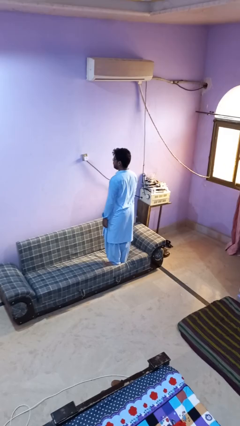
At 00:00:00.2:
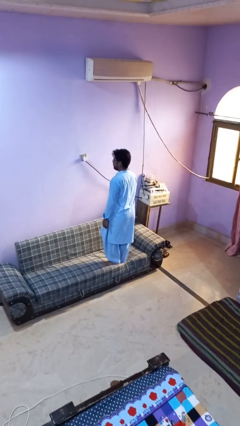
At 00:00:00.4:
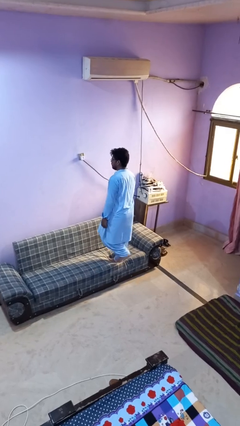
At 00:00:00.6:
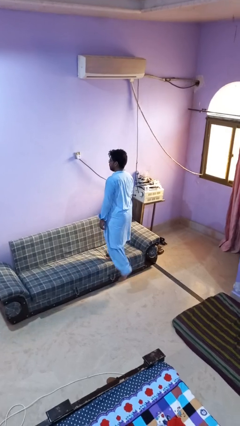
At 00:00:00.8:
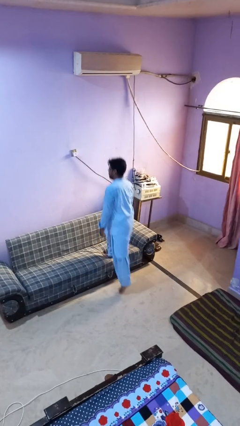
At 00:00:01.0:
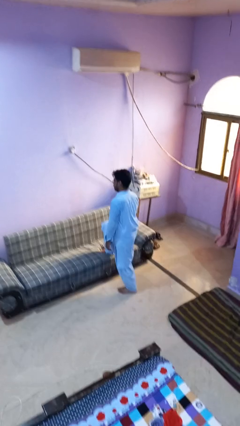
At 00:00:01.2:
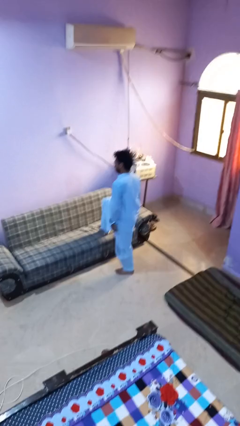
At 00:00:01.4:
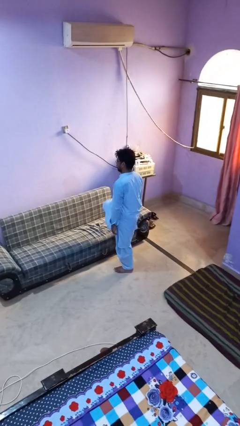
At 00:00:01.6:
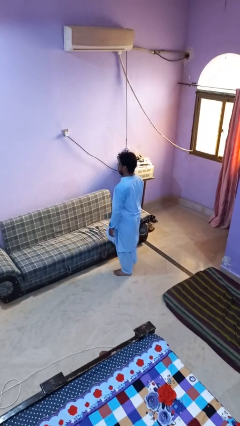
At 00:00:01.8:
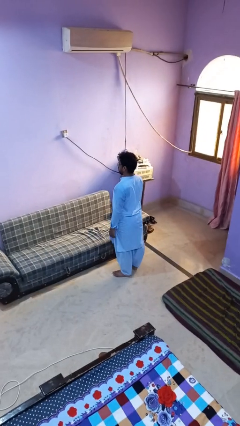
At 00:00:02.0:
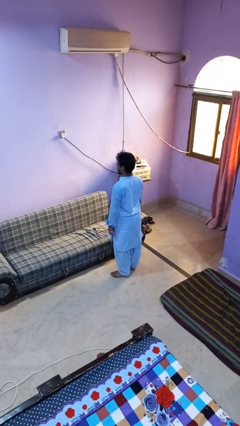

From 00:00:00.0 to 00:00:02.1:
person climbs off couch

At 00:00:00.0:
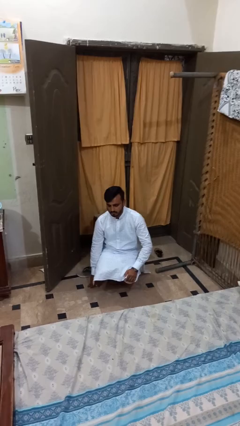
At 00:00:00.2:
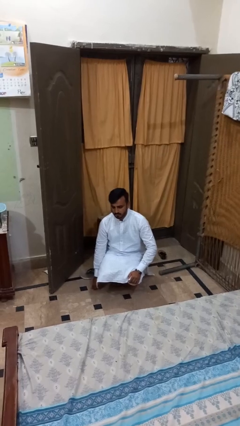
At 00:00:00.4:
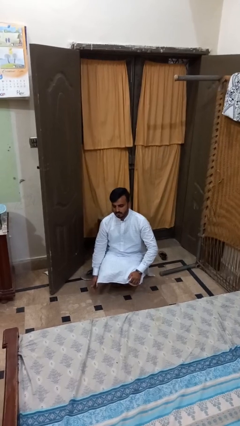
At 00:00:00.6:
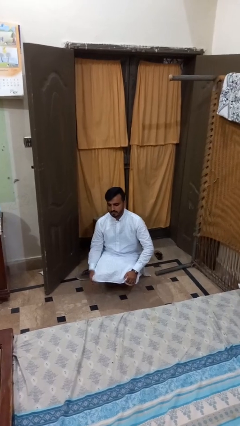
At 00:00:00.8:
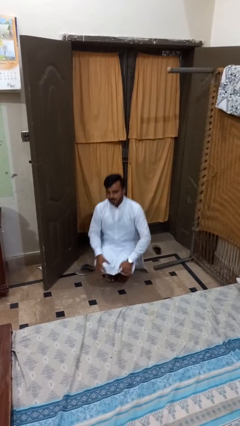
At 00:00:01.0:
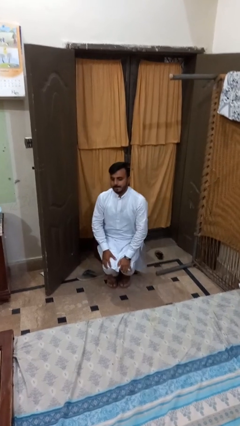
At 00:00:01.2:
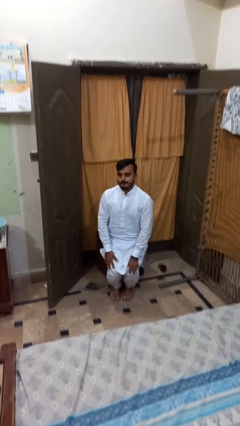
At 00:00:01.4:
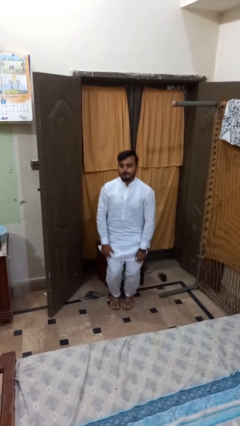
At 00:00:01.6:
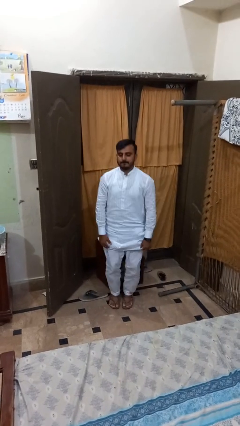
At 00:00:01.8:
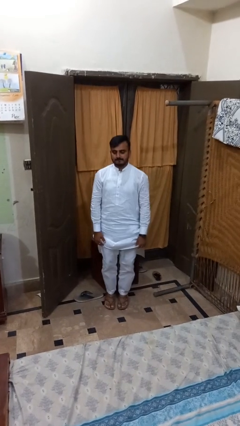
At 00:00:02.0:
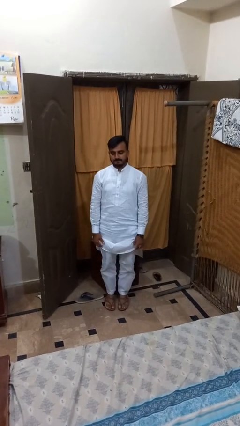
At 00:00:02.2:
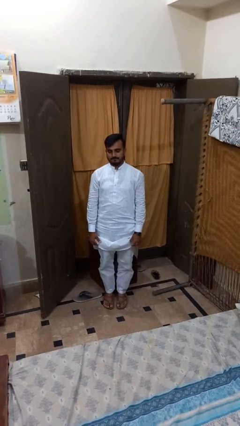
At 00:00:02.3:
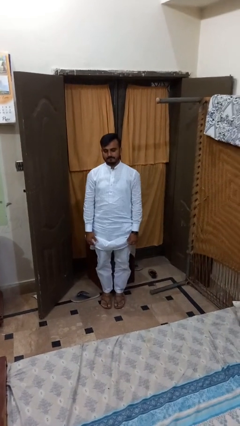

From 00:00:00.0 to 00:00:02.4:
person stands up from floor

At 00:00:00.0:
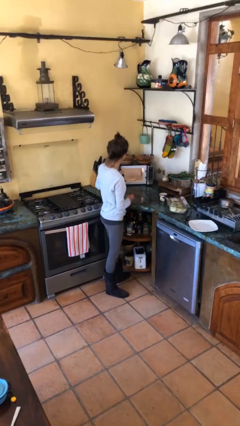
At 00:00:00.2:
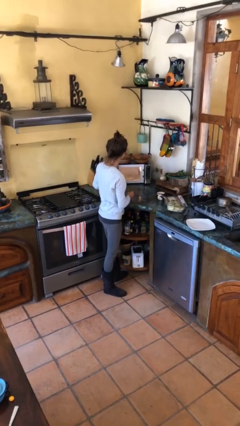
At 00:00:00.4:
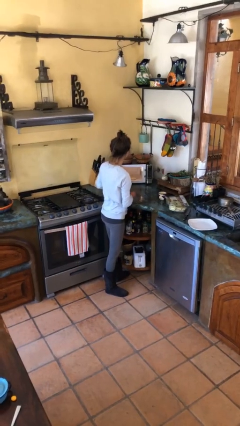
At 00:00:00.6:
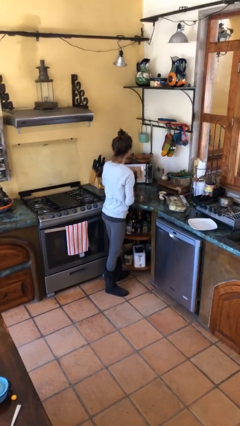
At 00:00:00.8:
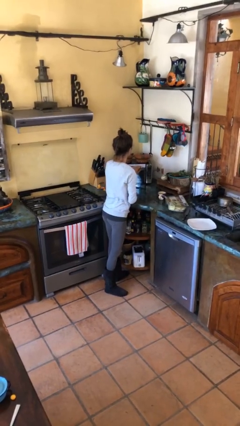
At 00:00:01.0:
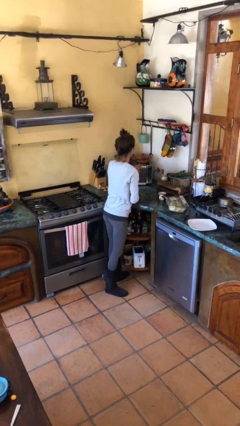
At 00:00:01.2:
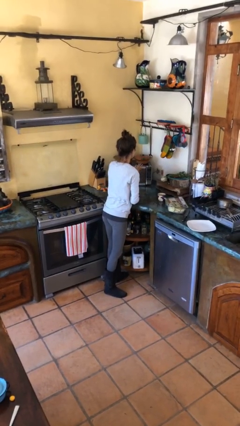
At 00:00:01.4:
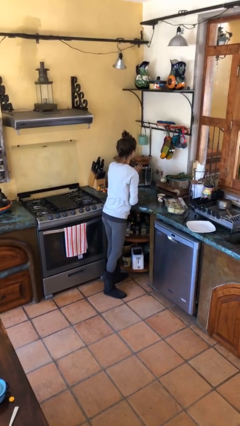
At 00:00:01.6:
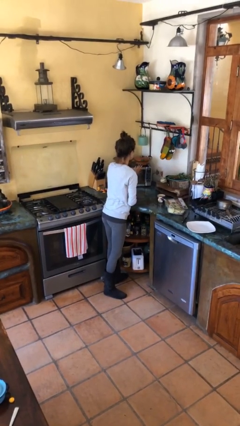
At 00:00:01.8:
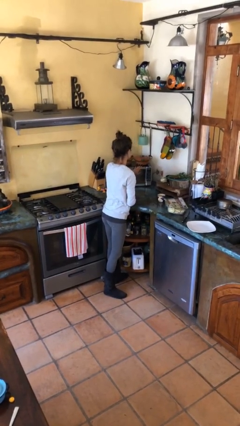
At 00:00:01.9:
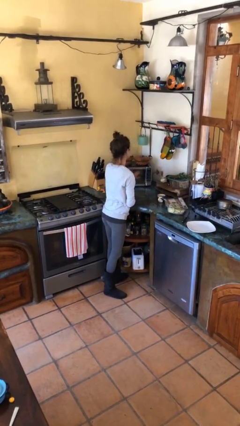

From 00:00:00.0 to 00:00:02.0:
person closes microwave

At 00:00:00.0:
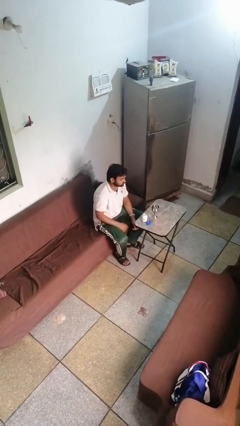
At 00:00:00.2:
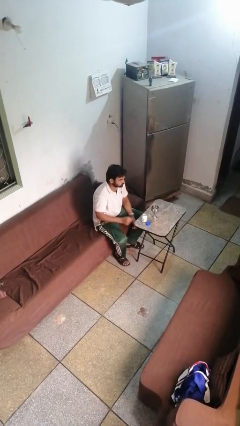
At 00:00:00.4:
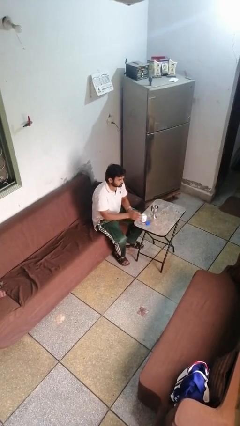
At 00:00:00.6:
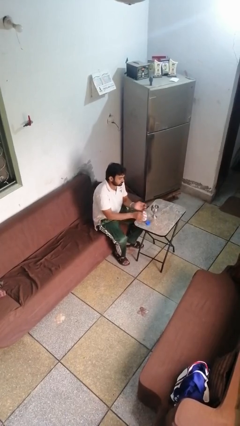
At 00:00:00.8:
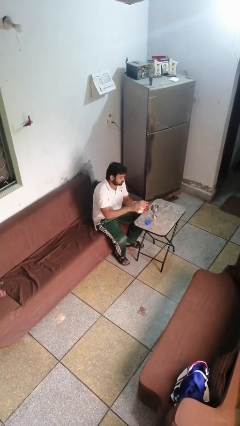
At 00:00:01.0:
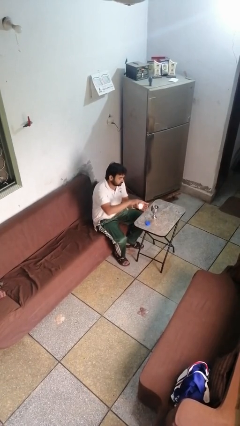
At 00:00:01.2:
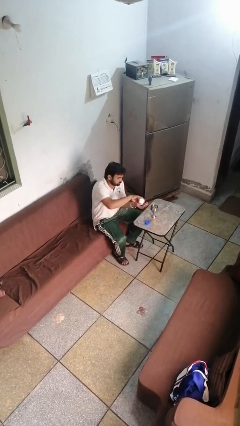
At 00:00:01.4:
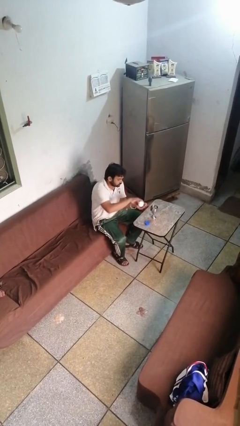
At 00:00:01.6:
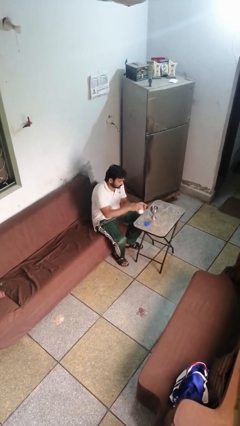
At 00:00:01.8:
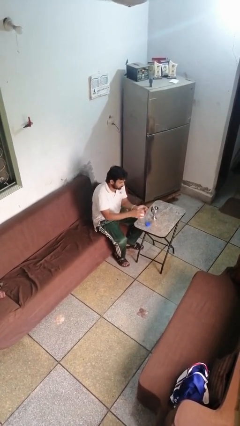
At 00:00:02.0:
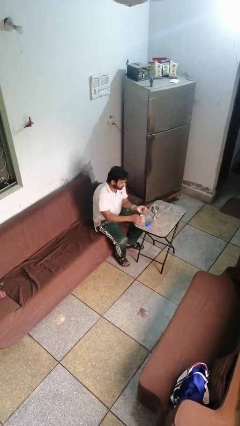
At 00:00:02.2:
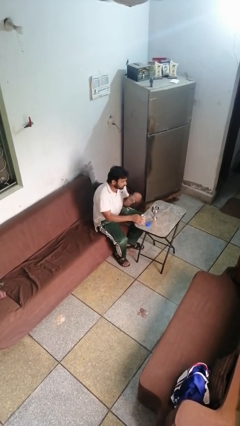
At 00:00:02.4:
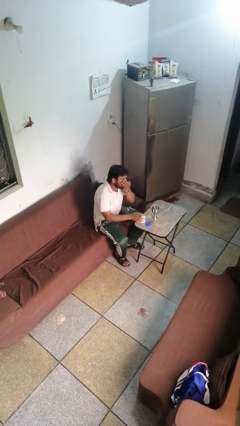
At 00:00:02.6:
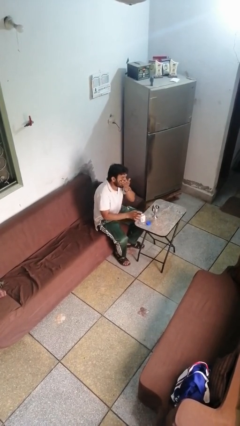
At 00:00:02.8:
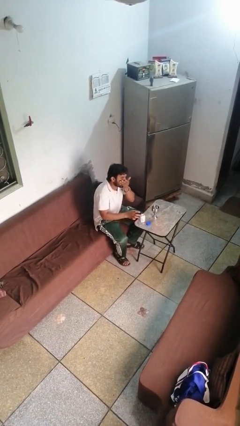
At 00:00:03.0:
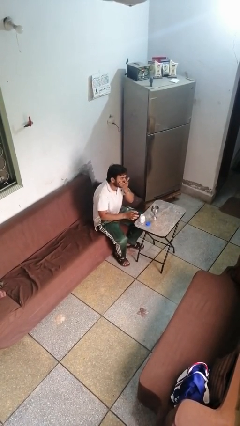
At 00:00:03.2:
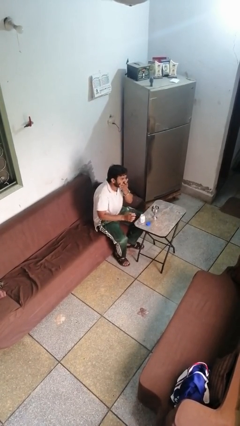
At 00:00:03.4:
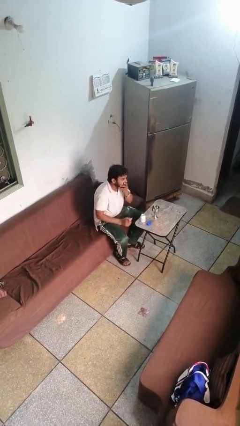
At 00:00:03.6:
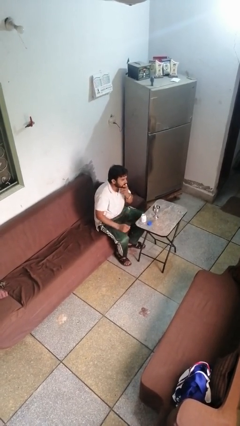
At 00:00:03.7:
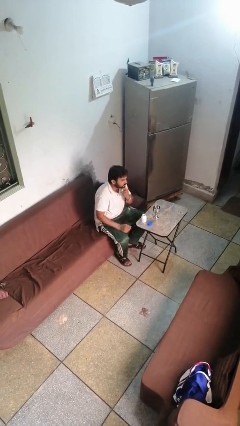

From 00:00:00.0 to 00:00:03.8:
person takes medicine pills

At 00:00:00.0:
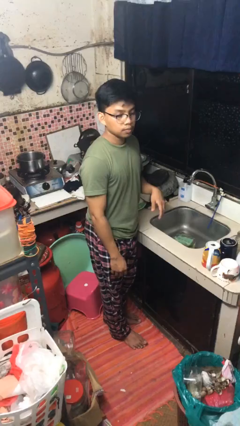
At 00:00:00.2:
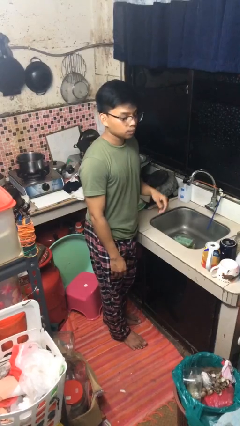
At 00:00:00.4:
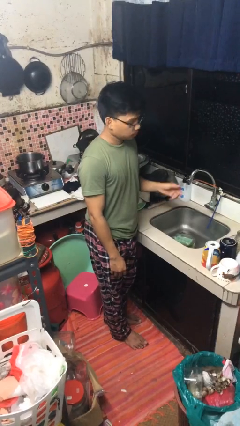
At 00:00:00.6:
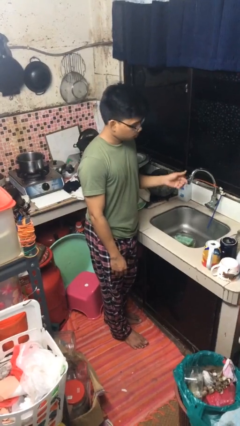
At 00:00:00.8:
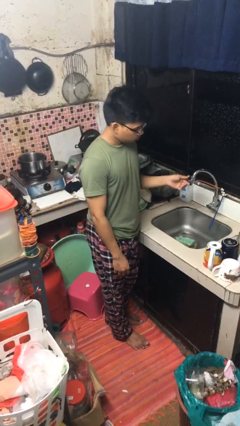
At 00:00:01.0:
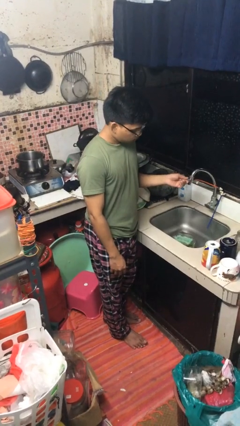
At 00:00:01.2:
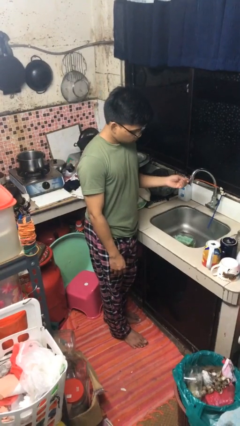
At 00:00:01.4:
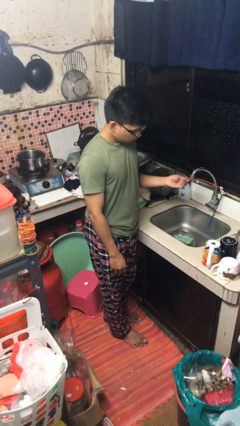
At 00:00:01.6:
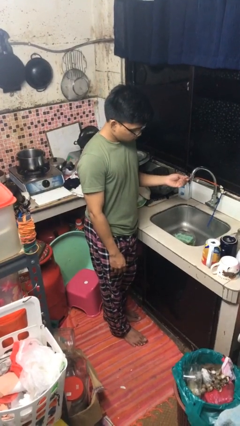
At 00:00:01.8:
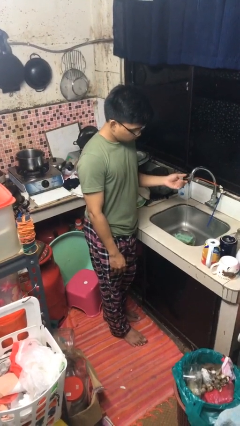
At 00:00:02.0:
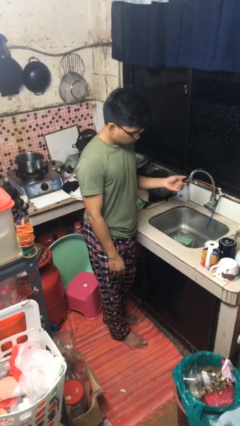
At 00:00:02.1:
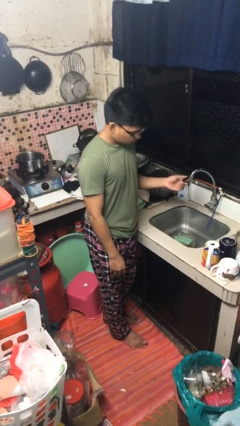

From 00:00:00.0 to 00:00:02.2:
person turns on faucet

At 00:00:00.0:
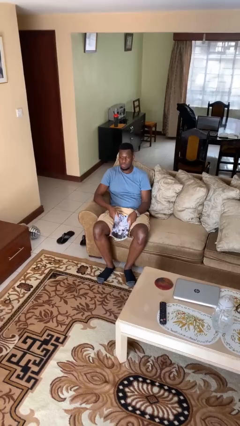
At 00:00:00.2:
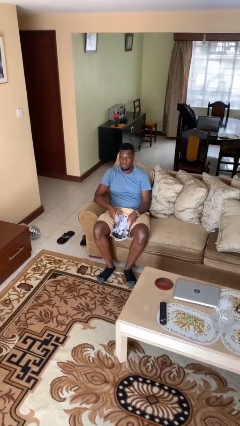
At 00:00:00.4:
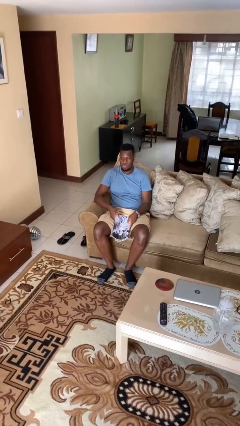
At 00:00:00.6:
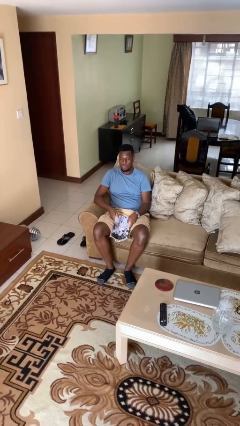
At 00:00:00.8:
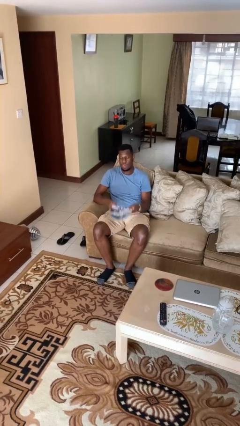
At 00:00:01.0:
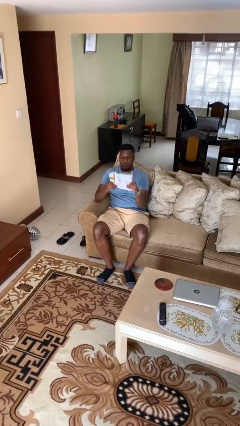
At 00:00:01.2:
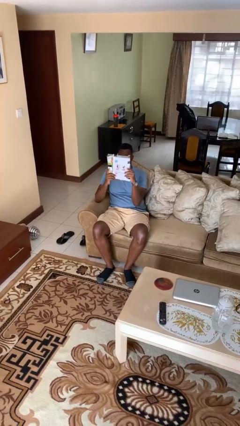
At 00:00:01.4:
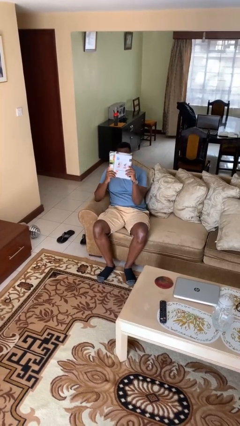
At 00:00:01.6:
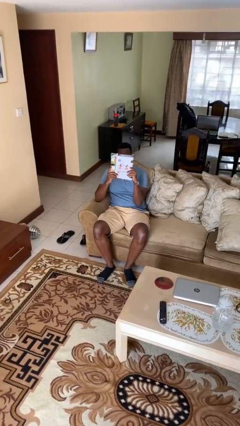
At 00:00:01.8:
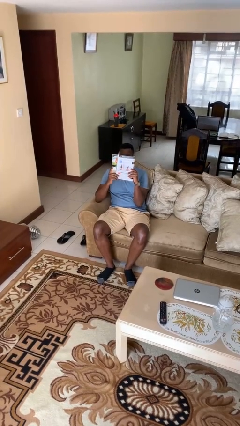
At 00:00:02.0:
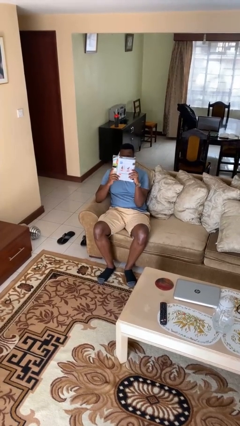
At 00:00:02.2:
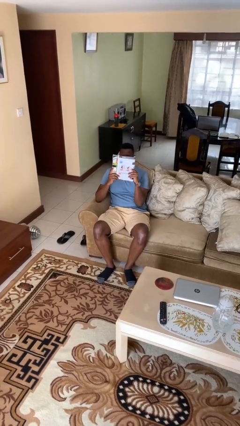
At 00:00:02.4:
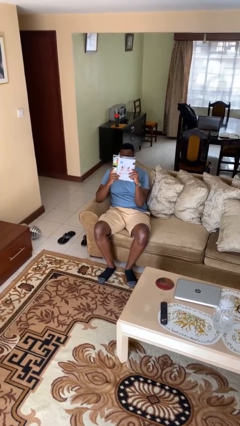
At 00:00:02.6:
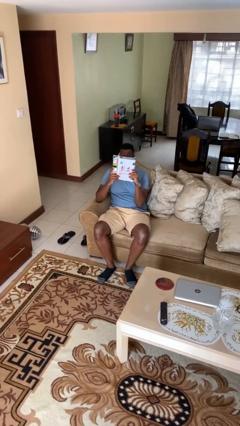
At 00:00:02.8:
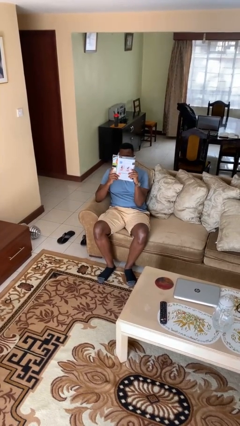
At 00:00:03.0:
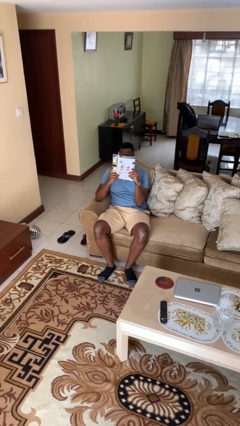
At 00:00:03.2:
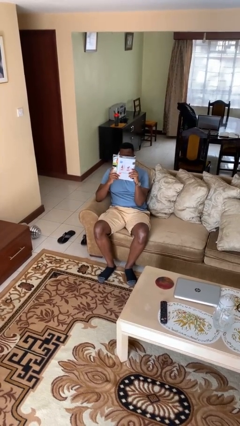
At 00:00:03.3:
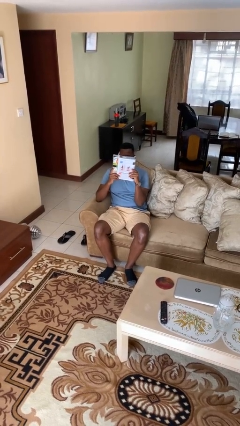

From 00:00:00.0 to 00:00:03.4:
person reads document

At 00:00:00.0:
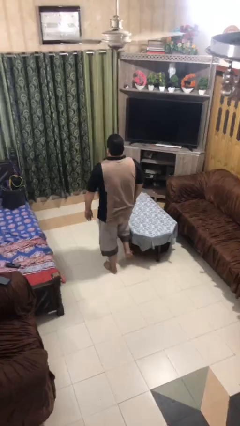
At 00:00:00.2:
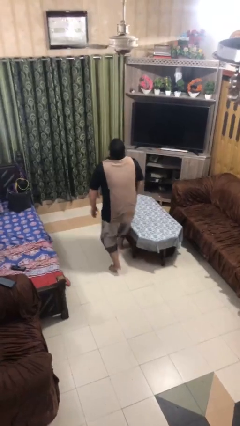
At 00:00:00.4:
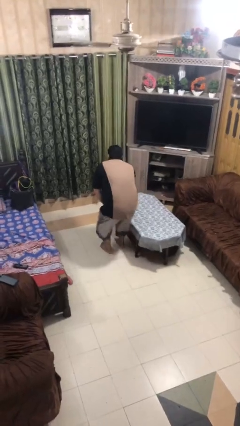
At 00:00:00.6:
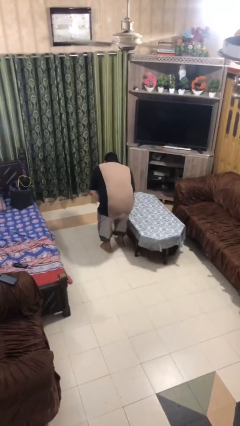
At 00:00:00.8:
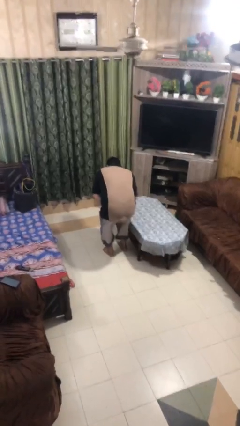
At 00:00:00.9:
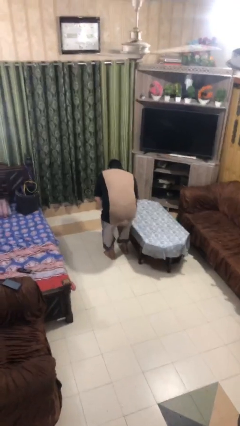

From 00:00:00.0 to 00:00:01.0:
person bumps into table
